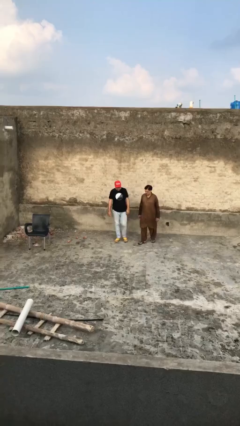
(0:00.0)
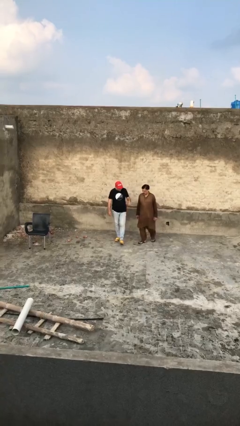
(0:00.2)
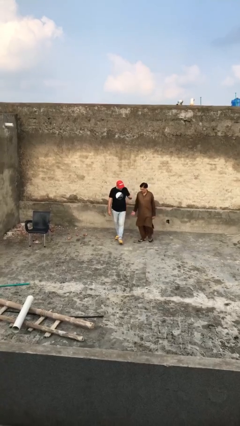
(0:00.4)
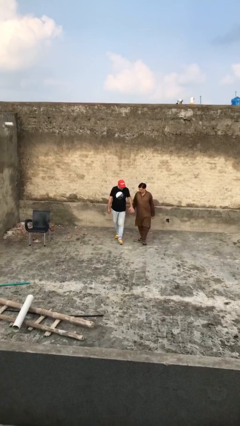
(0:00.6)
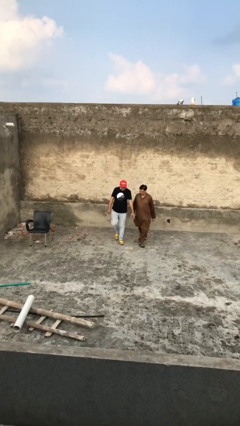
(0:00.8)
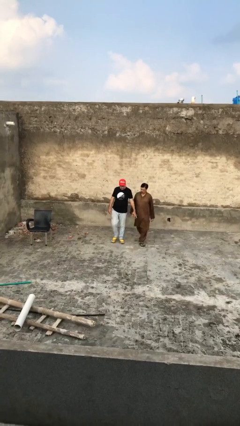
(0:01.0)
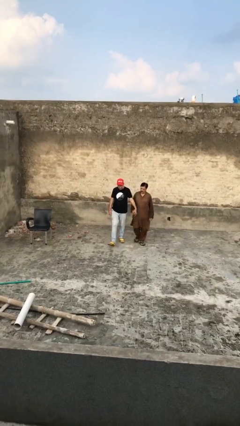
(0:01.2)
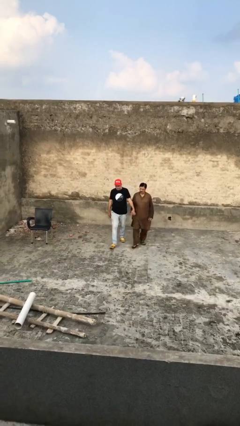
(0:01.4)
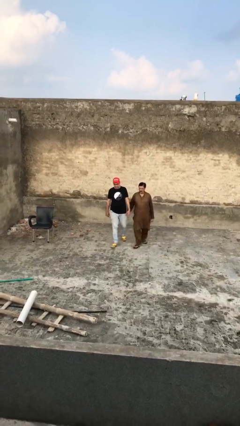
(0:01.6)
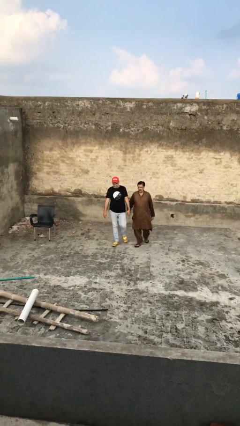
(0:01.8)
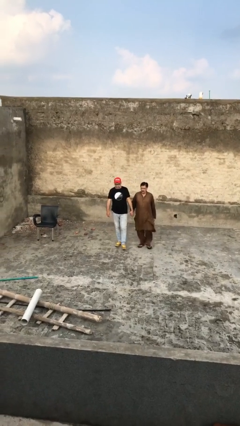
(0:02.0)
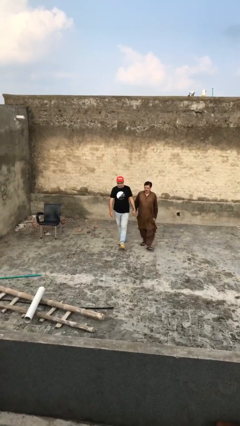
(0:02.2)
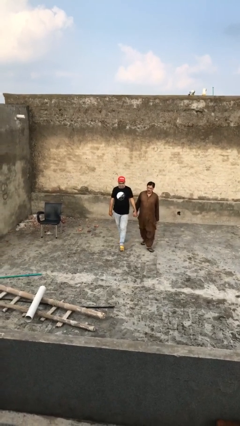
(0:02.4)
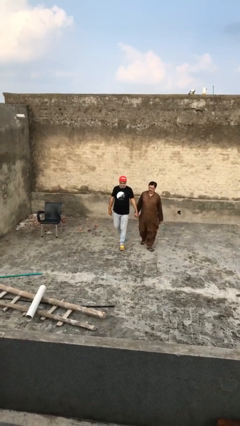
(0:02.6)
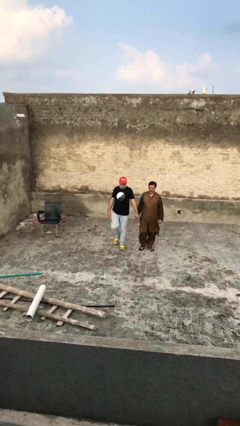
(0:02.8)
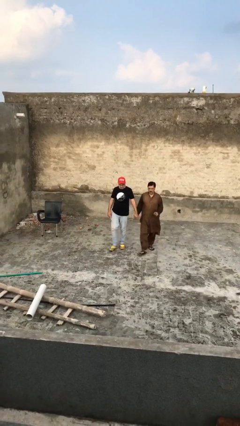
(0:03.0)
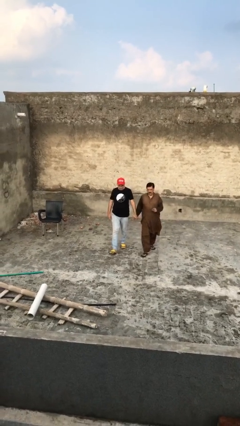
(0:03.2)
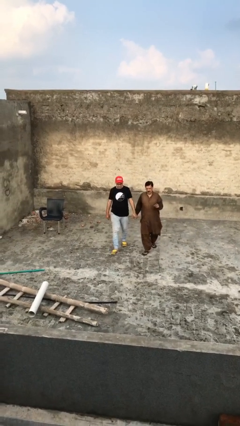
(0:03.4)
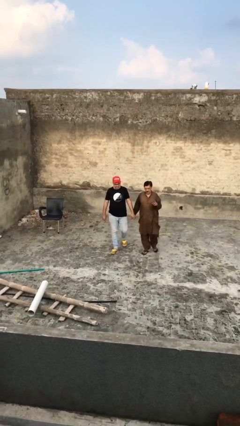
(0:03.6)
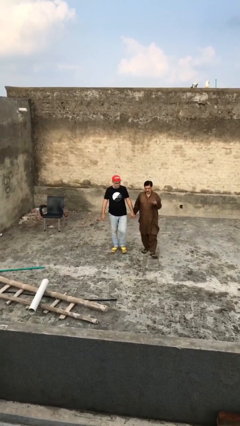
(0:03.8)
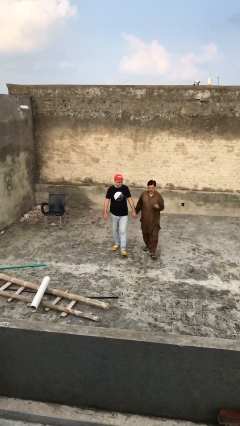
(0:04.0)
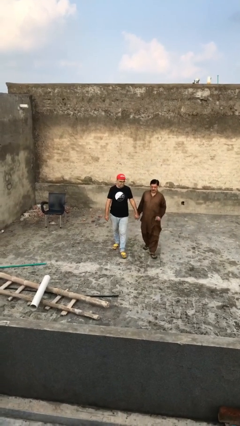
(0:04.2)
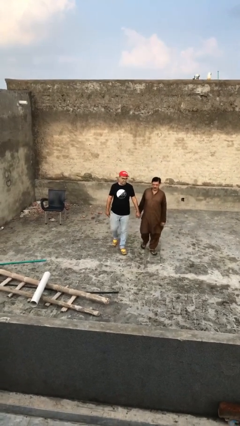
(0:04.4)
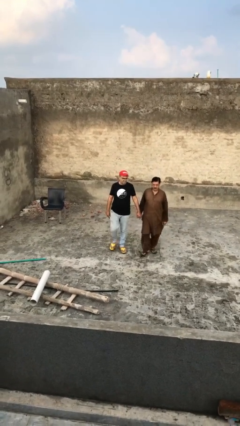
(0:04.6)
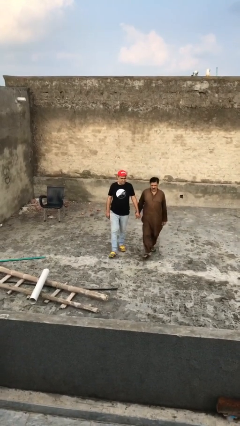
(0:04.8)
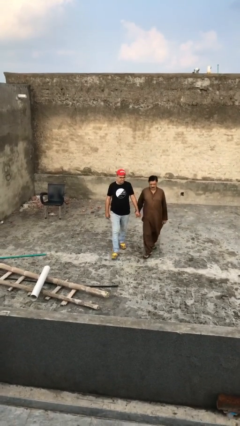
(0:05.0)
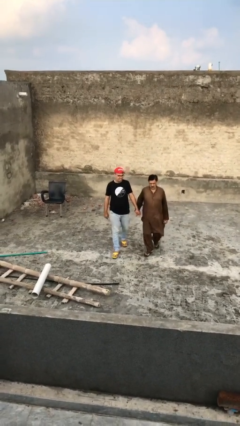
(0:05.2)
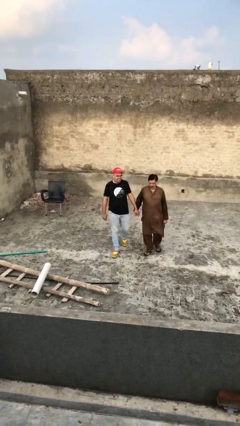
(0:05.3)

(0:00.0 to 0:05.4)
person holds hand

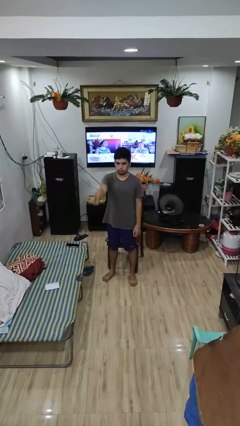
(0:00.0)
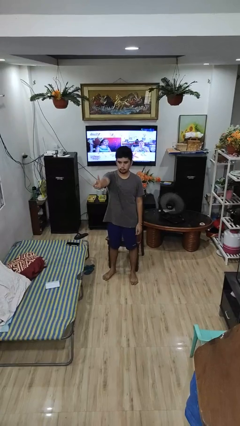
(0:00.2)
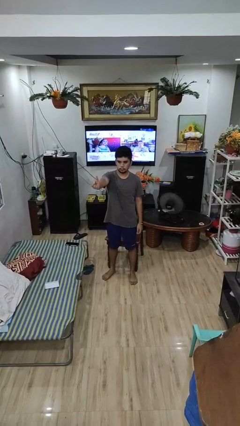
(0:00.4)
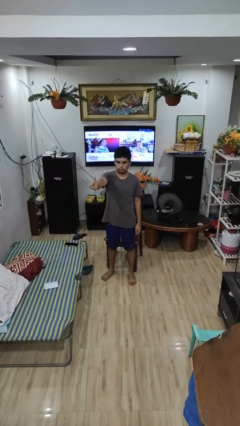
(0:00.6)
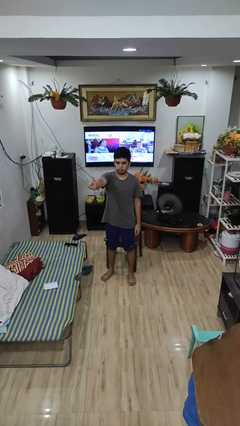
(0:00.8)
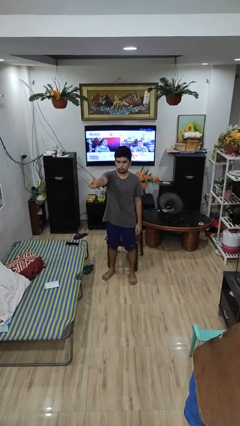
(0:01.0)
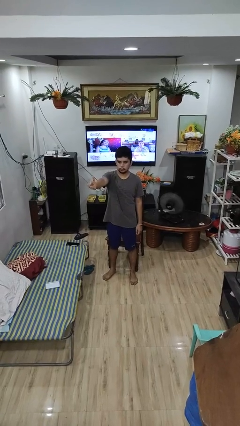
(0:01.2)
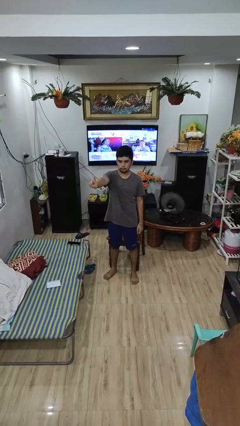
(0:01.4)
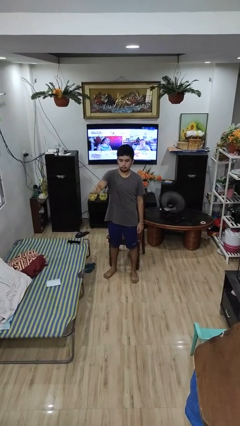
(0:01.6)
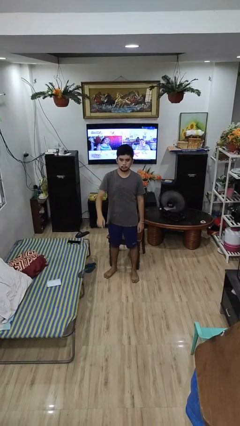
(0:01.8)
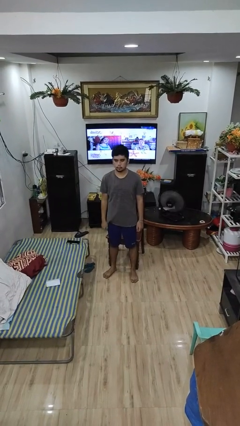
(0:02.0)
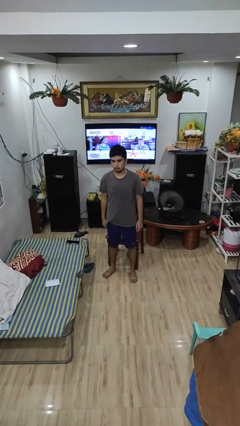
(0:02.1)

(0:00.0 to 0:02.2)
person gestures number one

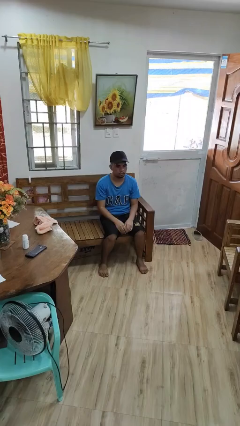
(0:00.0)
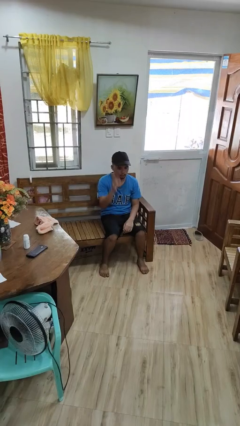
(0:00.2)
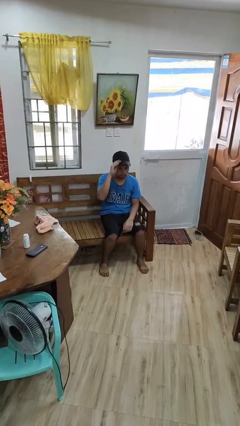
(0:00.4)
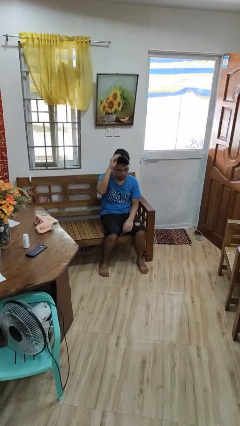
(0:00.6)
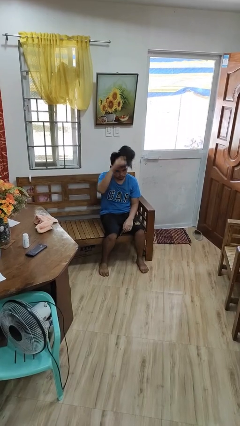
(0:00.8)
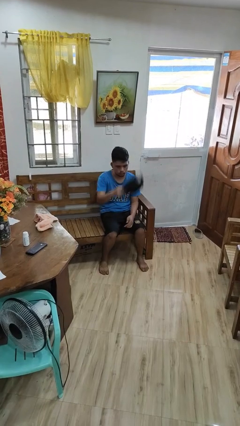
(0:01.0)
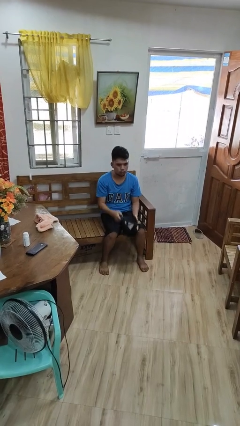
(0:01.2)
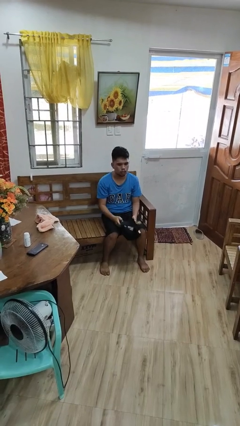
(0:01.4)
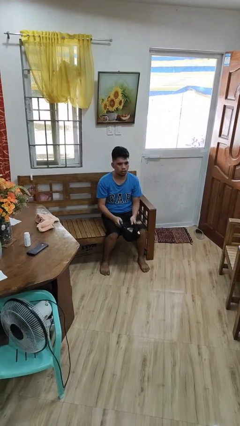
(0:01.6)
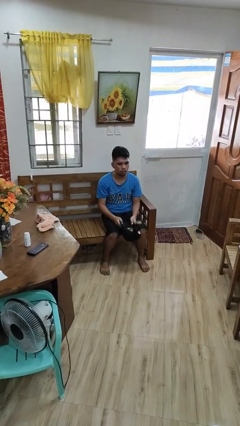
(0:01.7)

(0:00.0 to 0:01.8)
person takes off hat

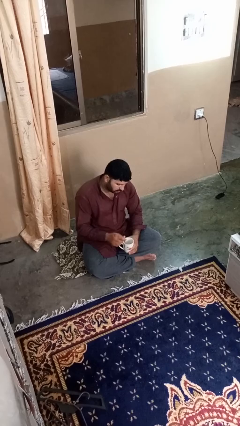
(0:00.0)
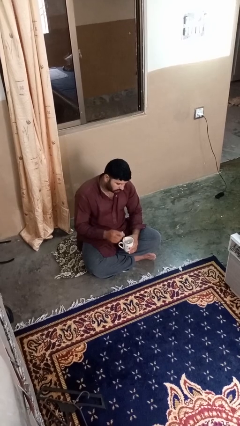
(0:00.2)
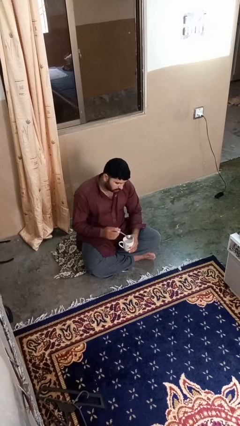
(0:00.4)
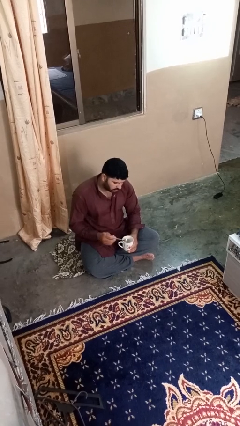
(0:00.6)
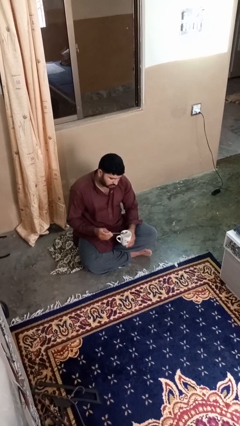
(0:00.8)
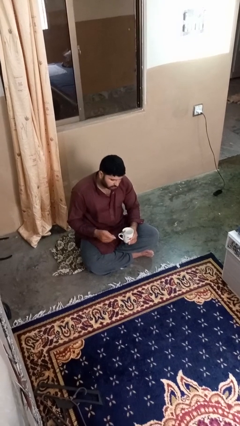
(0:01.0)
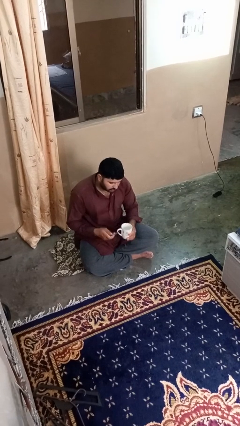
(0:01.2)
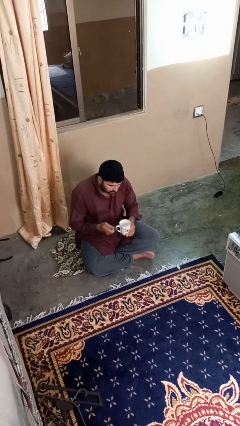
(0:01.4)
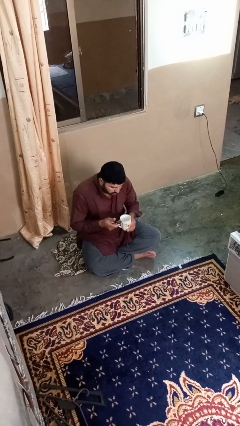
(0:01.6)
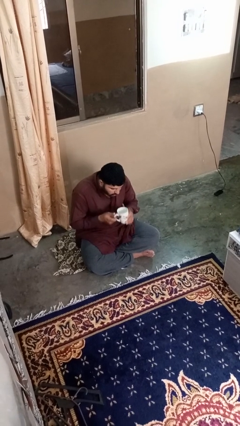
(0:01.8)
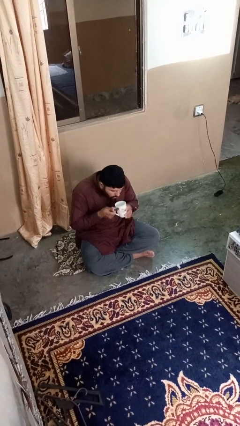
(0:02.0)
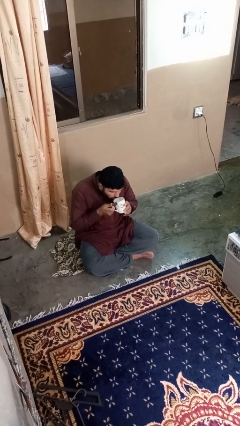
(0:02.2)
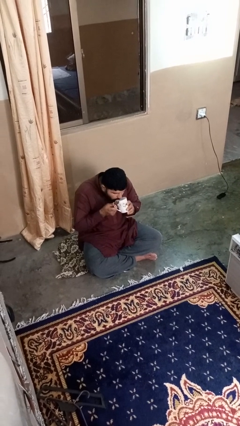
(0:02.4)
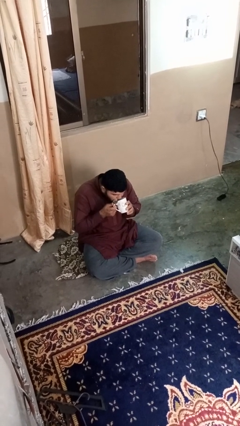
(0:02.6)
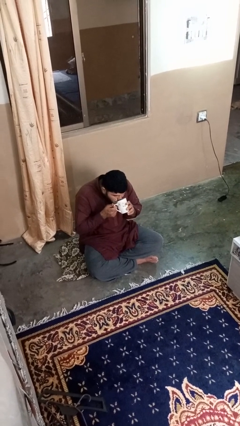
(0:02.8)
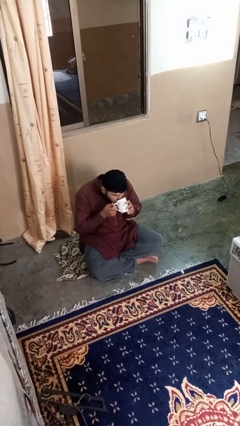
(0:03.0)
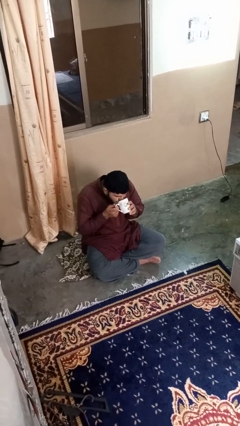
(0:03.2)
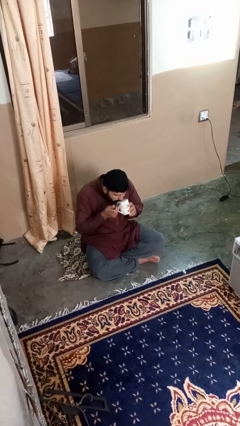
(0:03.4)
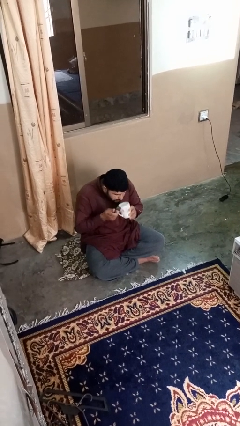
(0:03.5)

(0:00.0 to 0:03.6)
person drinks from mug

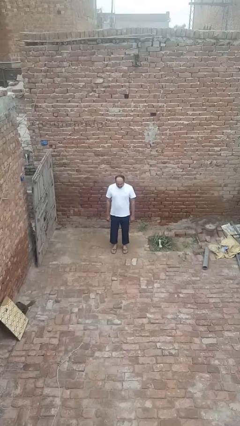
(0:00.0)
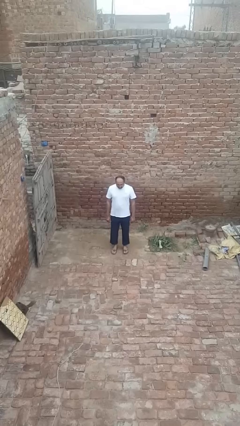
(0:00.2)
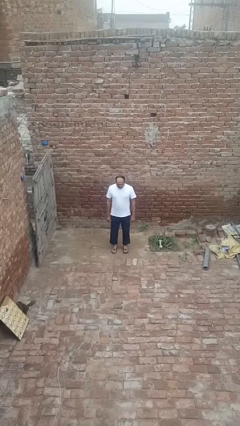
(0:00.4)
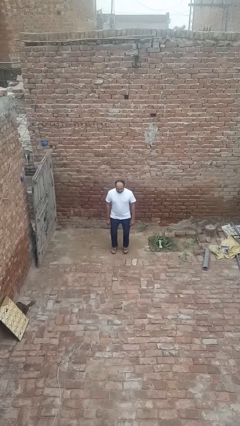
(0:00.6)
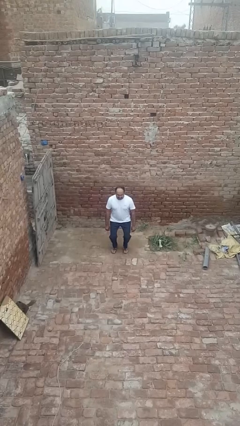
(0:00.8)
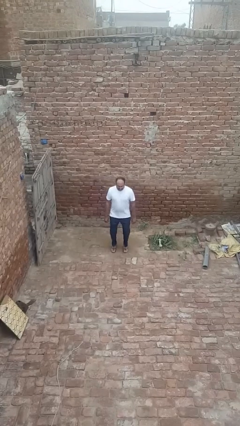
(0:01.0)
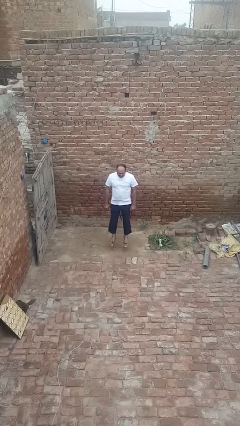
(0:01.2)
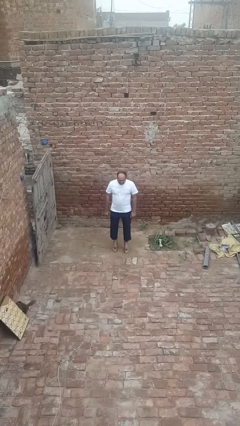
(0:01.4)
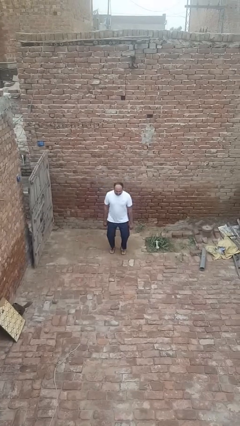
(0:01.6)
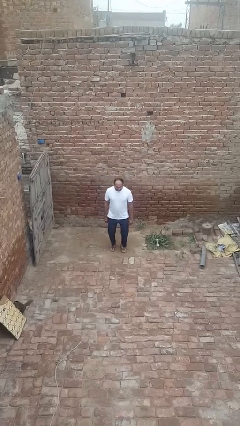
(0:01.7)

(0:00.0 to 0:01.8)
person jumps

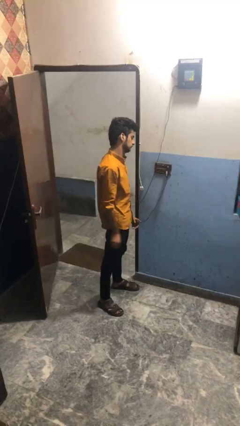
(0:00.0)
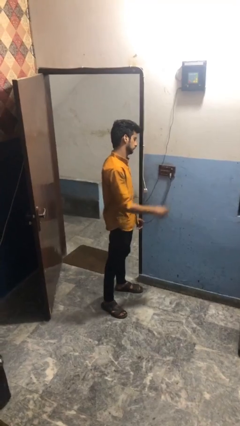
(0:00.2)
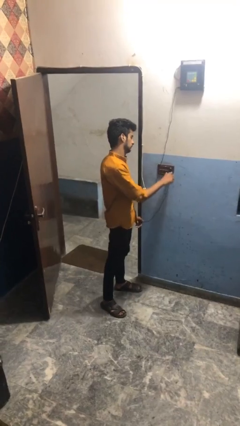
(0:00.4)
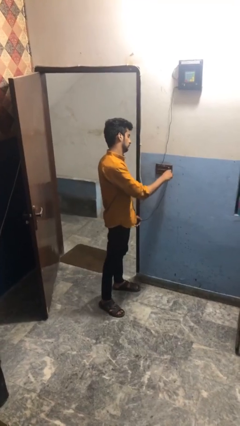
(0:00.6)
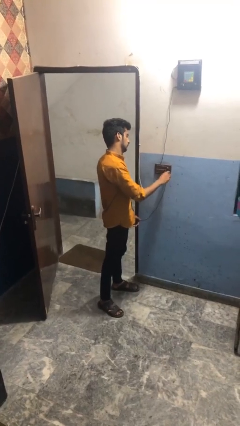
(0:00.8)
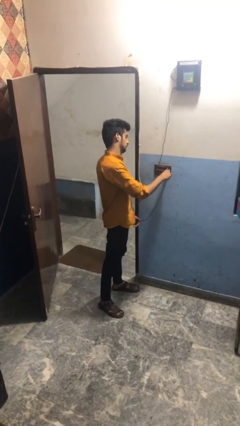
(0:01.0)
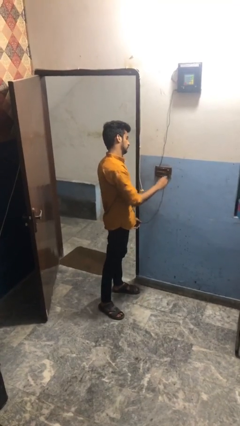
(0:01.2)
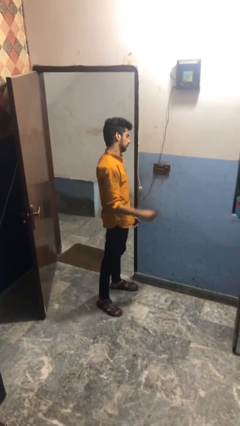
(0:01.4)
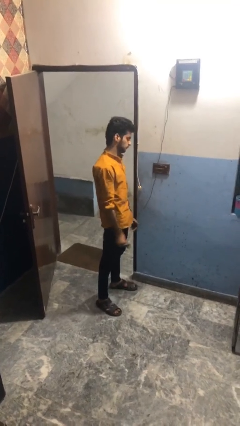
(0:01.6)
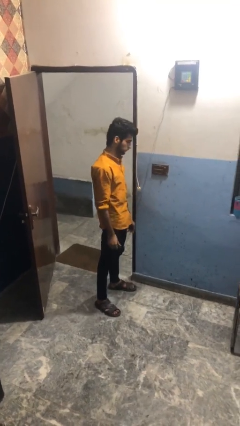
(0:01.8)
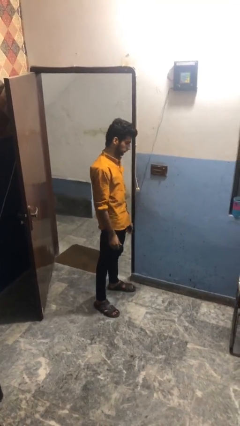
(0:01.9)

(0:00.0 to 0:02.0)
person unplugs from electrical socket

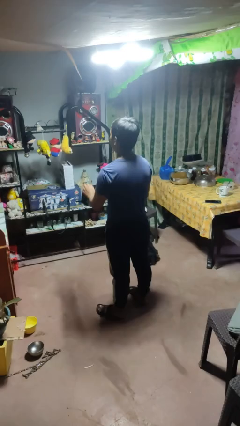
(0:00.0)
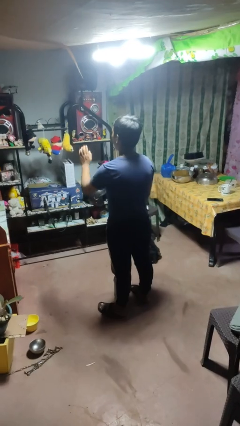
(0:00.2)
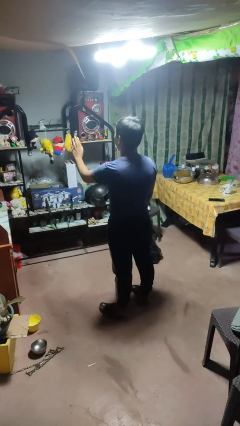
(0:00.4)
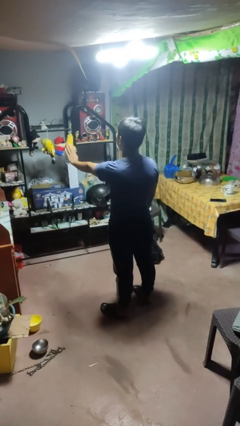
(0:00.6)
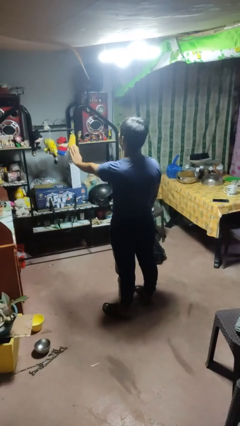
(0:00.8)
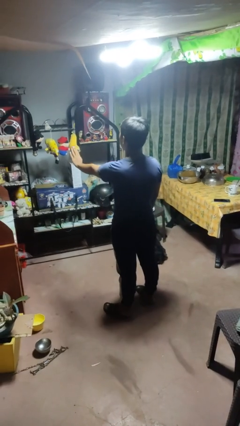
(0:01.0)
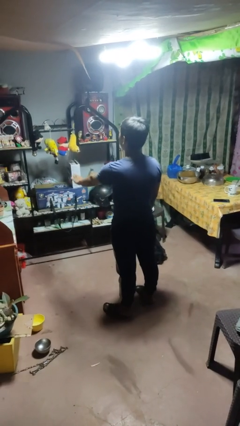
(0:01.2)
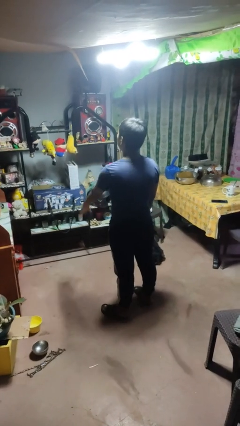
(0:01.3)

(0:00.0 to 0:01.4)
person gestures stop
